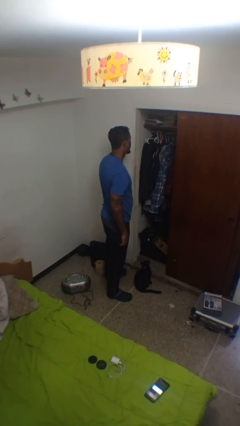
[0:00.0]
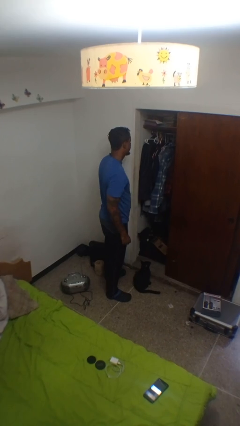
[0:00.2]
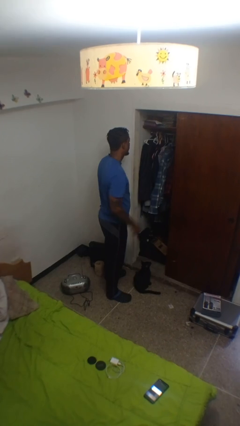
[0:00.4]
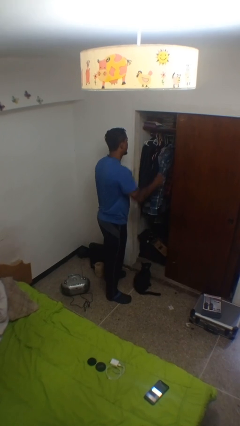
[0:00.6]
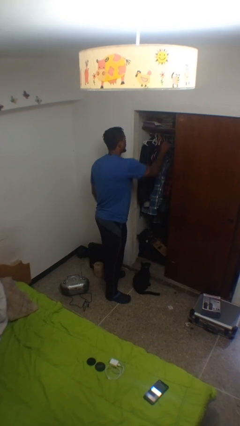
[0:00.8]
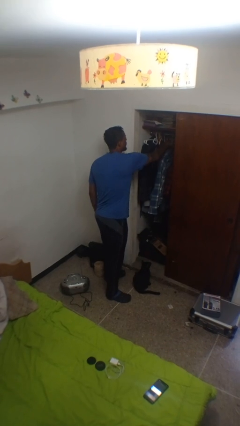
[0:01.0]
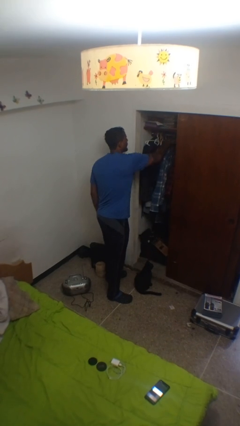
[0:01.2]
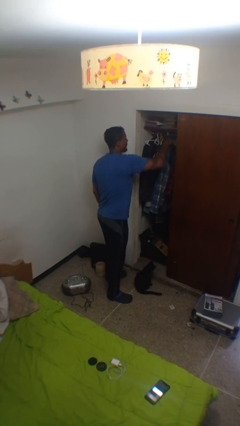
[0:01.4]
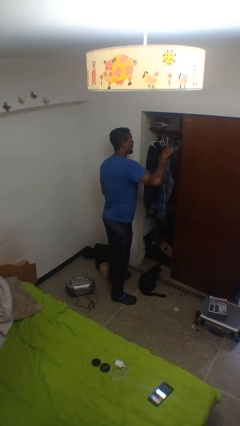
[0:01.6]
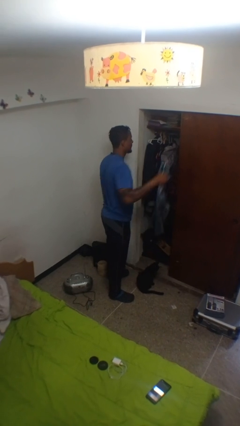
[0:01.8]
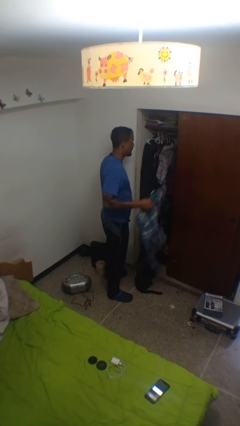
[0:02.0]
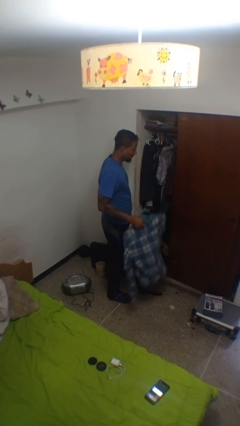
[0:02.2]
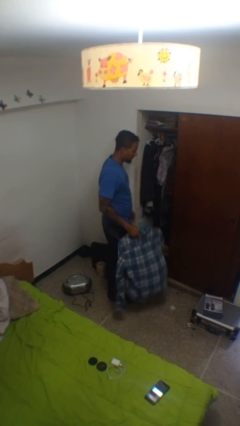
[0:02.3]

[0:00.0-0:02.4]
person takes clothes from closet

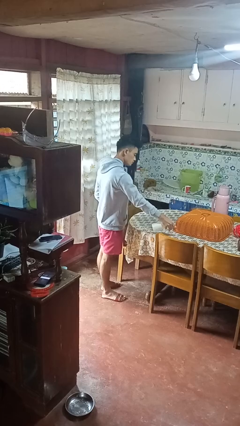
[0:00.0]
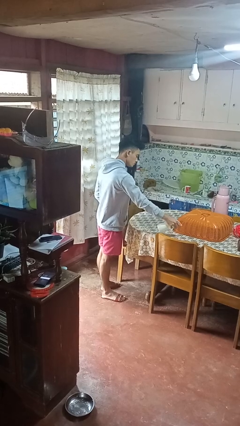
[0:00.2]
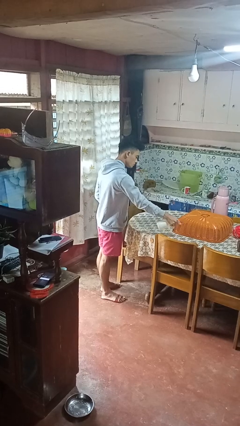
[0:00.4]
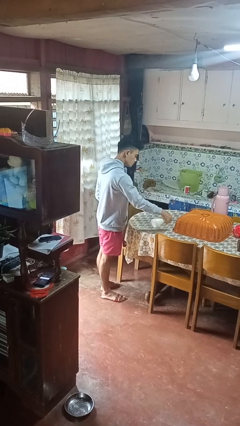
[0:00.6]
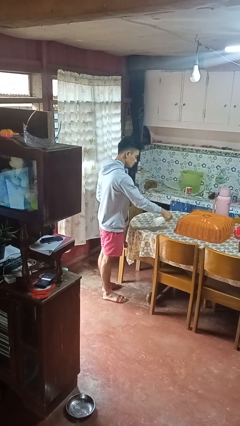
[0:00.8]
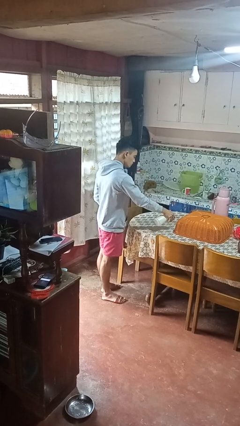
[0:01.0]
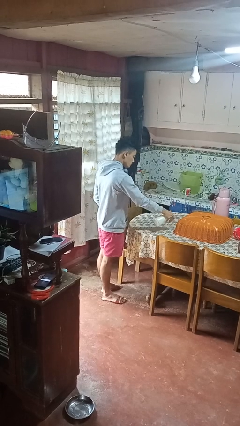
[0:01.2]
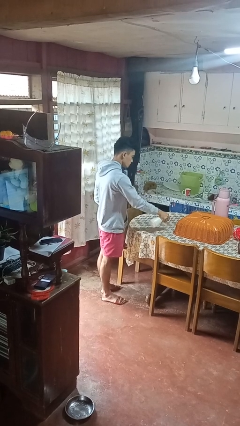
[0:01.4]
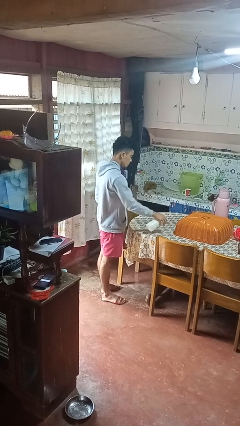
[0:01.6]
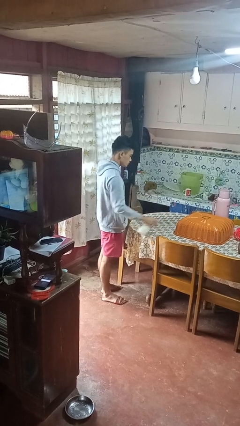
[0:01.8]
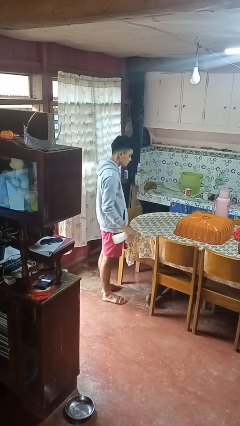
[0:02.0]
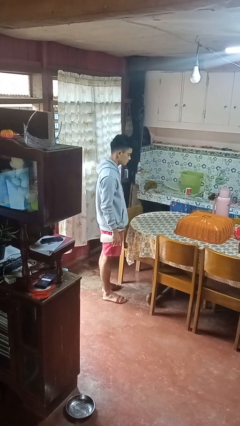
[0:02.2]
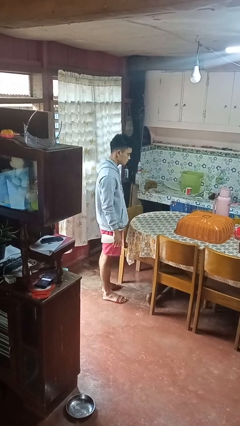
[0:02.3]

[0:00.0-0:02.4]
person sprays from bottle

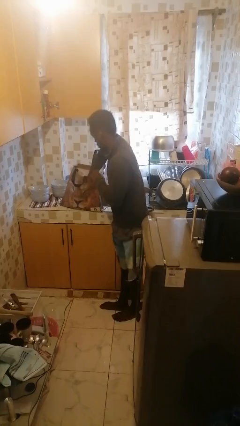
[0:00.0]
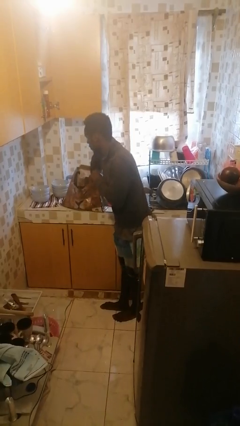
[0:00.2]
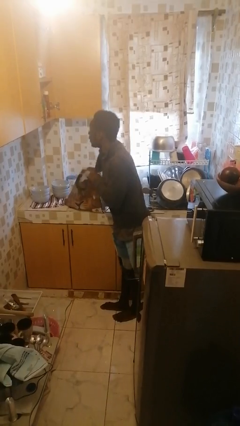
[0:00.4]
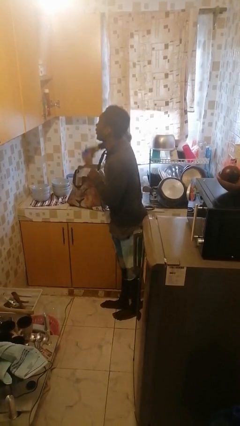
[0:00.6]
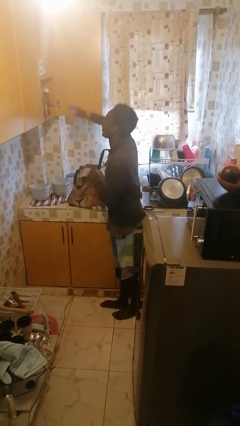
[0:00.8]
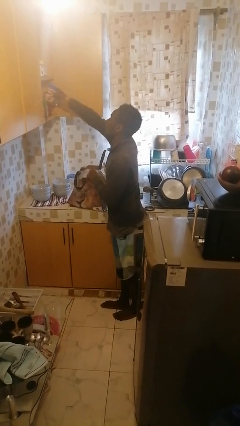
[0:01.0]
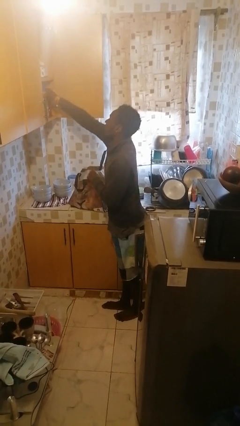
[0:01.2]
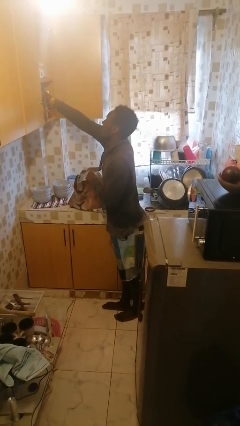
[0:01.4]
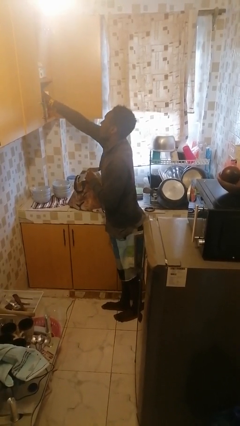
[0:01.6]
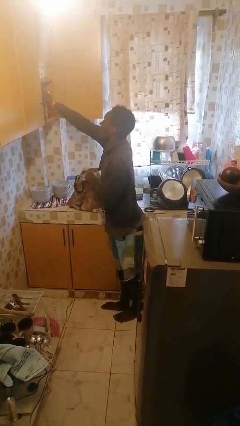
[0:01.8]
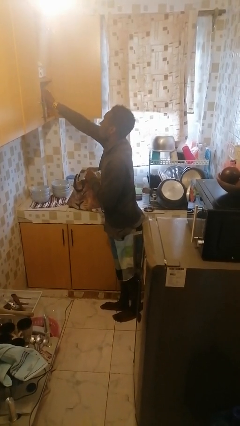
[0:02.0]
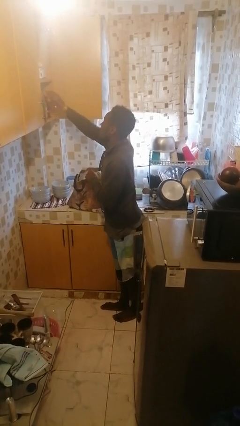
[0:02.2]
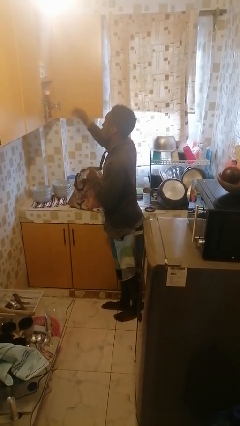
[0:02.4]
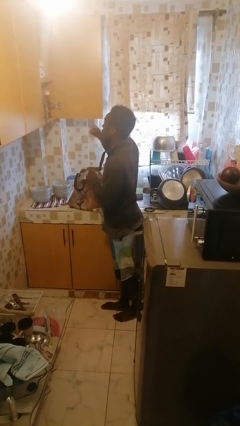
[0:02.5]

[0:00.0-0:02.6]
person loads groceries into cabinet

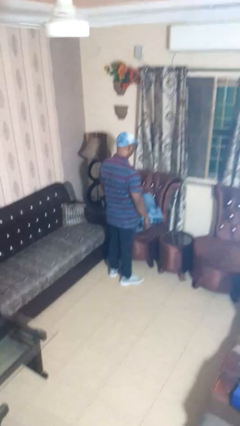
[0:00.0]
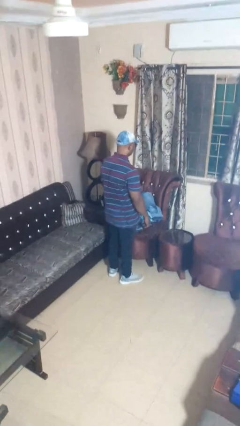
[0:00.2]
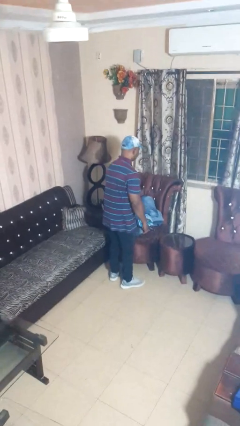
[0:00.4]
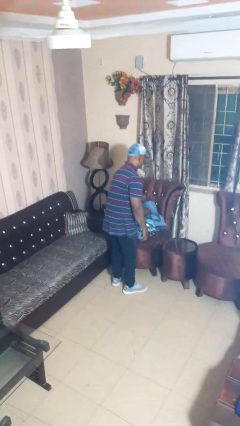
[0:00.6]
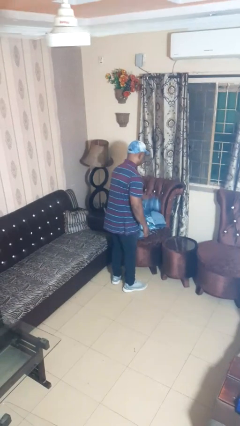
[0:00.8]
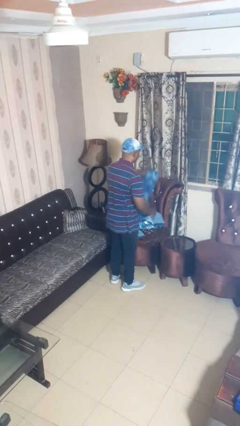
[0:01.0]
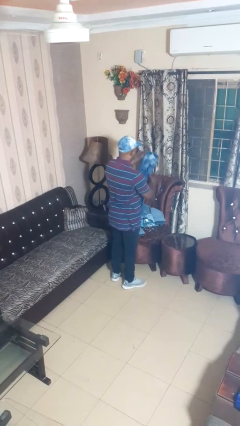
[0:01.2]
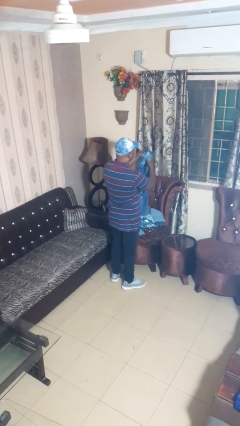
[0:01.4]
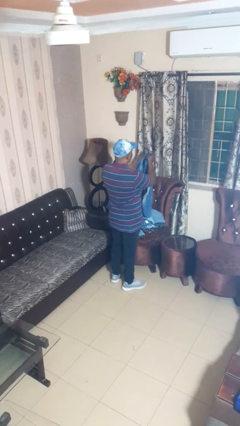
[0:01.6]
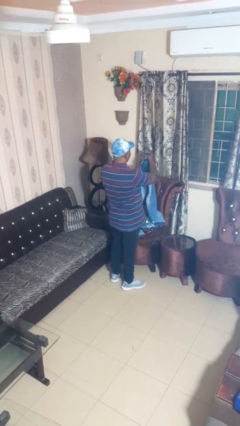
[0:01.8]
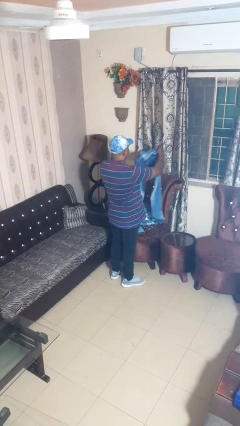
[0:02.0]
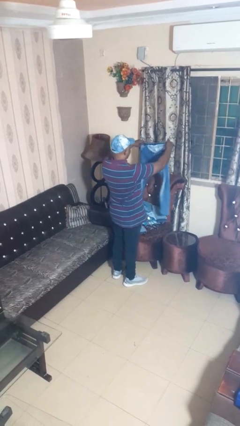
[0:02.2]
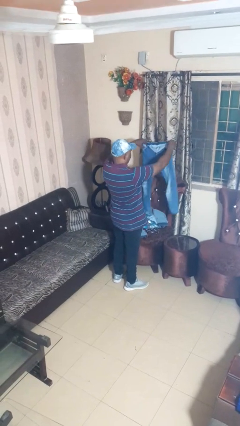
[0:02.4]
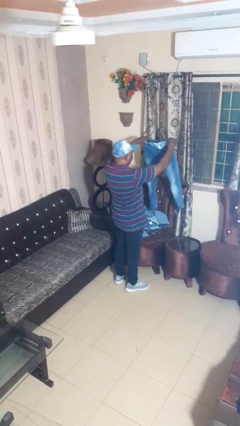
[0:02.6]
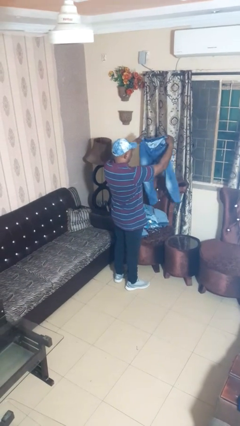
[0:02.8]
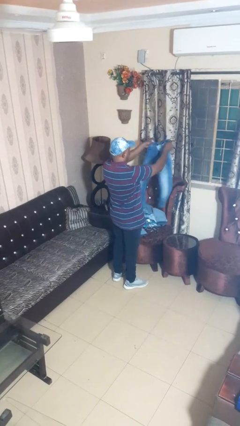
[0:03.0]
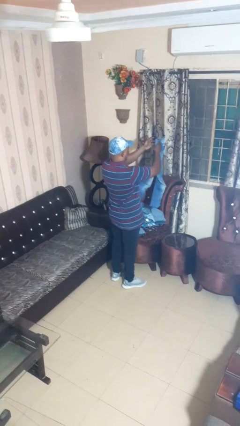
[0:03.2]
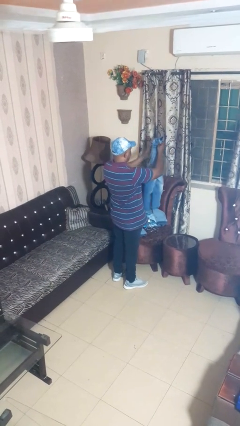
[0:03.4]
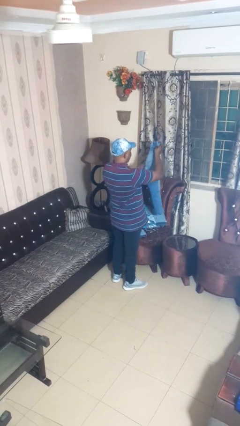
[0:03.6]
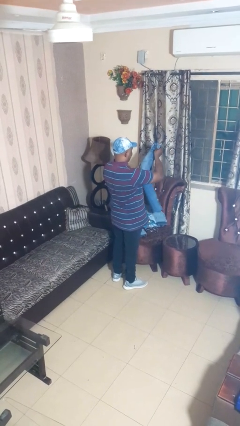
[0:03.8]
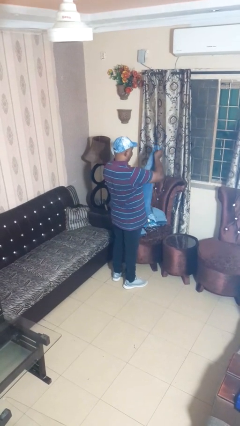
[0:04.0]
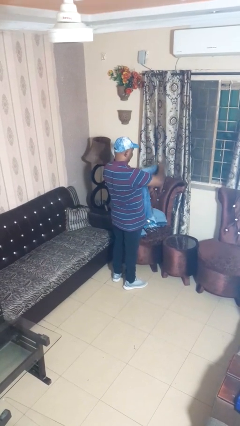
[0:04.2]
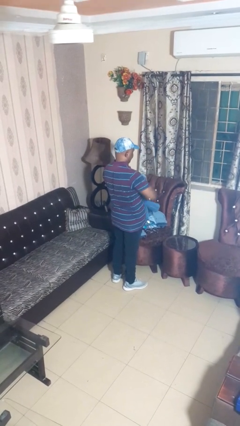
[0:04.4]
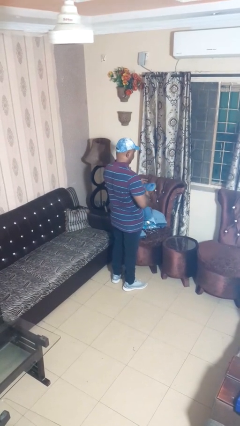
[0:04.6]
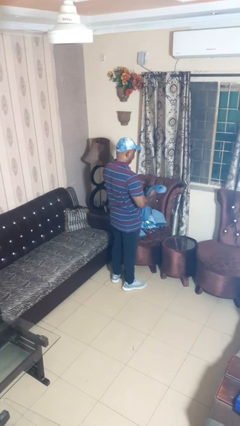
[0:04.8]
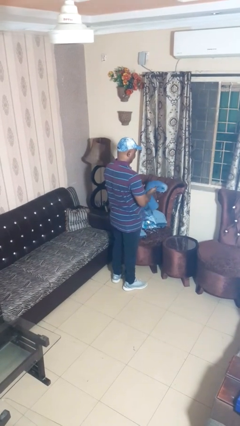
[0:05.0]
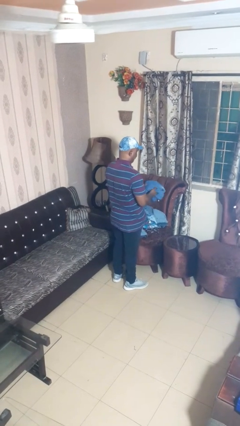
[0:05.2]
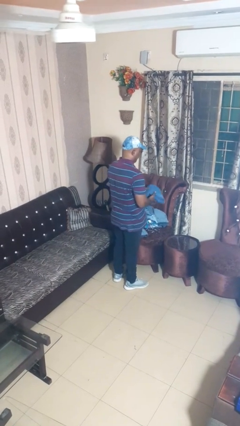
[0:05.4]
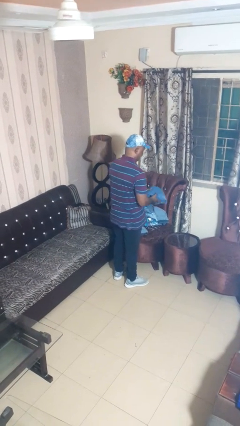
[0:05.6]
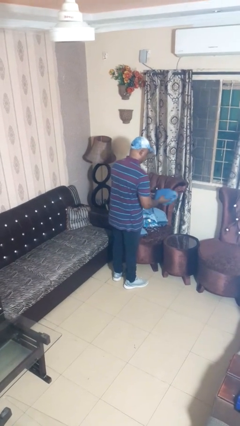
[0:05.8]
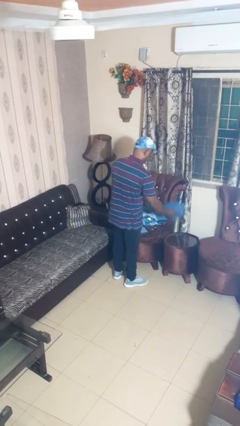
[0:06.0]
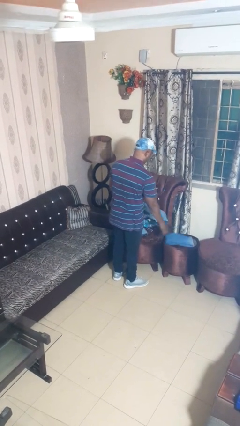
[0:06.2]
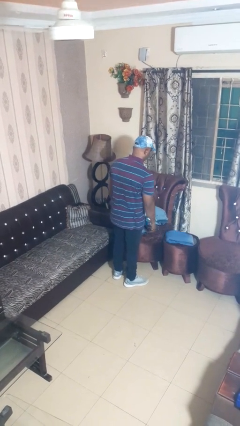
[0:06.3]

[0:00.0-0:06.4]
person folds pants

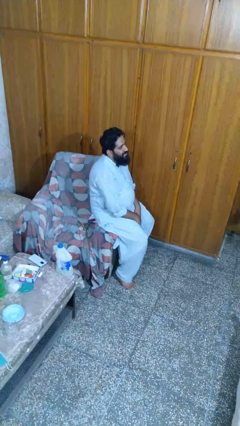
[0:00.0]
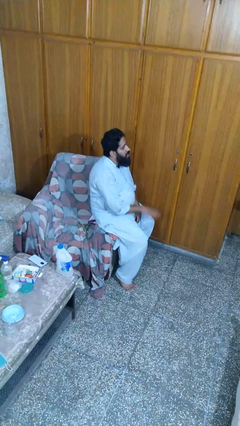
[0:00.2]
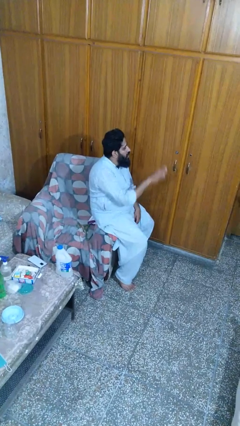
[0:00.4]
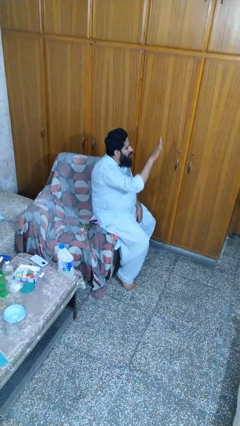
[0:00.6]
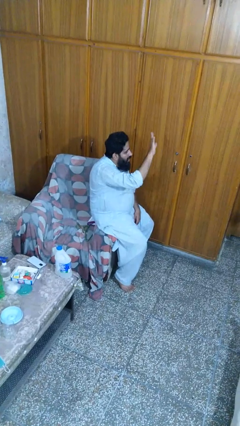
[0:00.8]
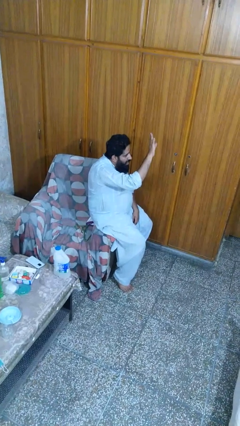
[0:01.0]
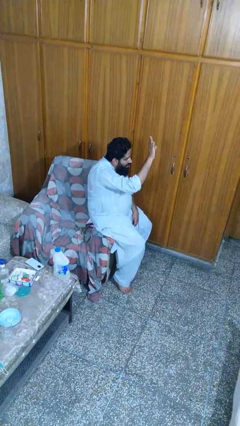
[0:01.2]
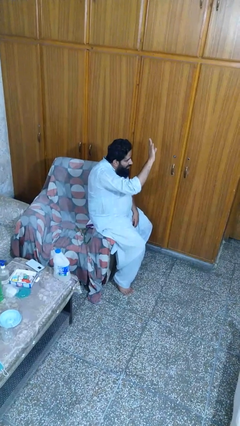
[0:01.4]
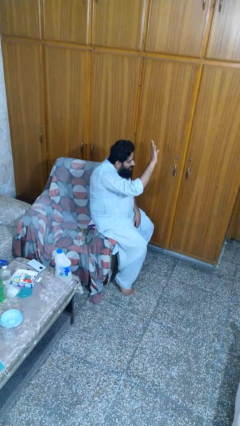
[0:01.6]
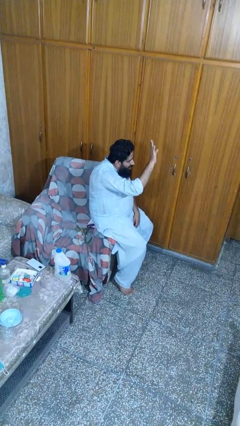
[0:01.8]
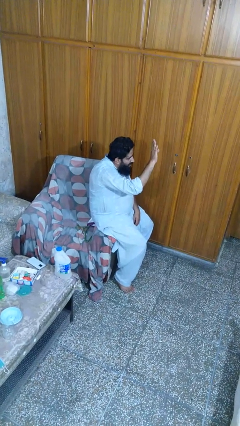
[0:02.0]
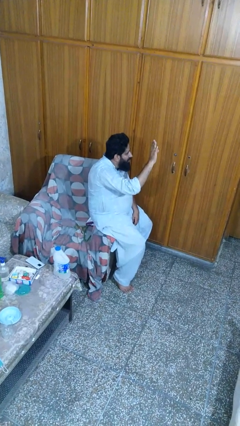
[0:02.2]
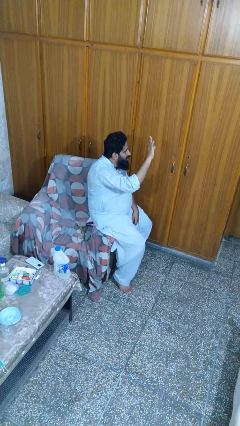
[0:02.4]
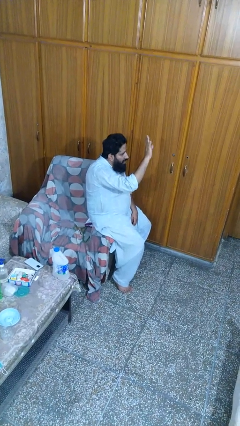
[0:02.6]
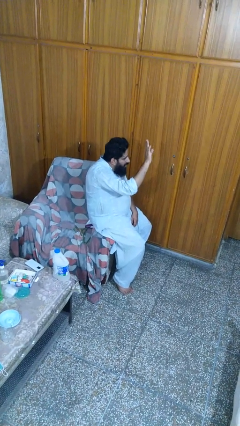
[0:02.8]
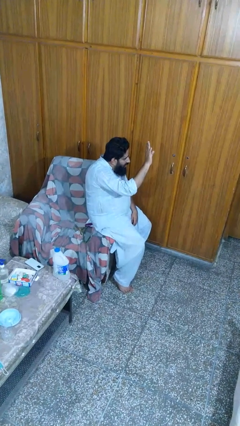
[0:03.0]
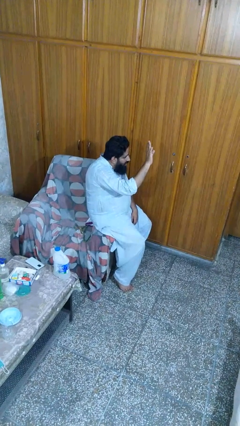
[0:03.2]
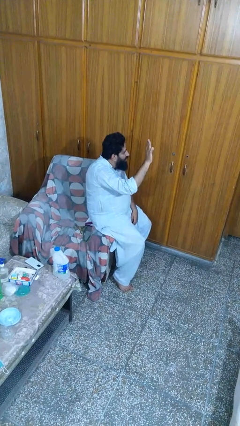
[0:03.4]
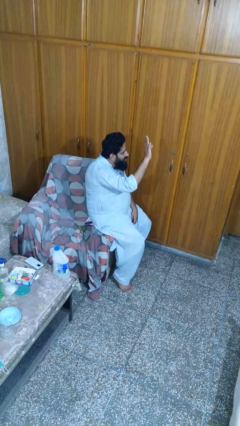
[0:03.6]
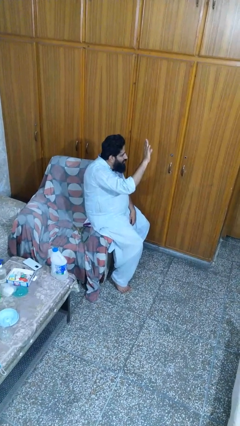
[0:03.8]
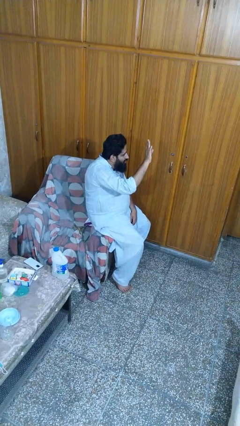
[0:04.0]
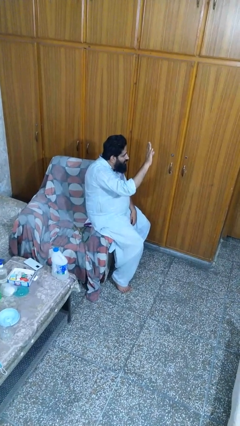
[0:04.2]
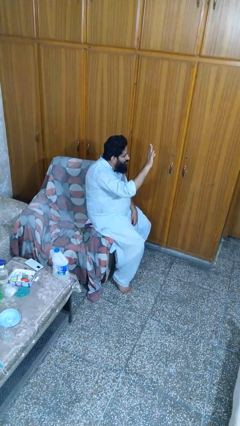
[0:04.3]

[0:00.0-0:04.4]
person waves at person
